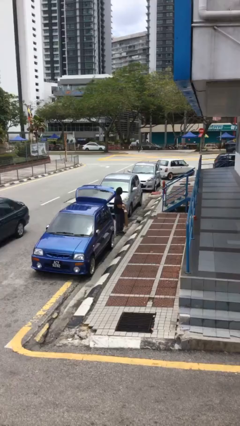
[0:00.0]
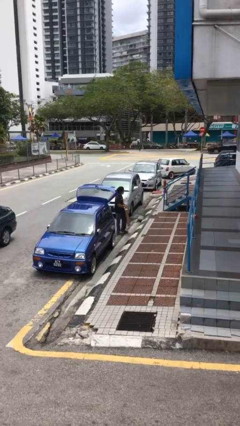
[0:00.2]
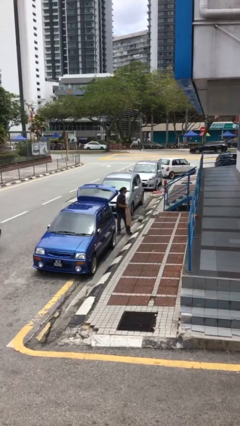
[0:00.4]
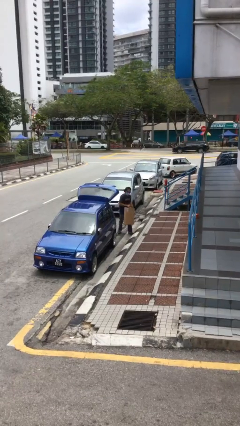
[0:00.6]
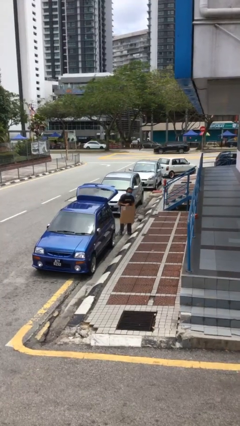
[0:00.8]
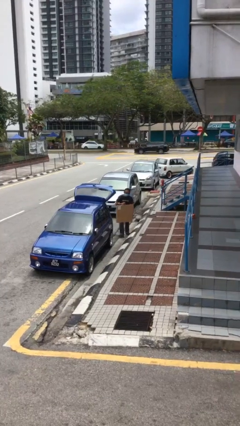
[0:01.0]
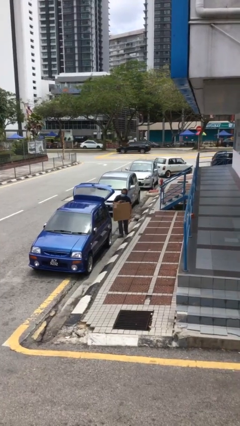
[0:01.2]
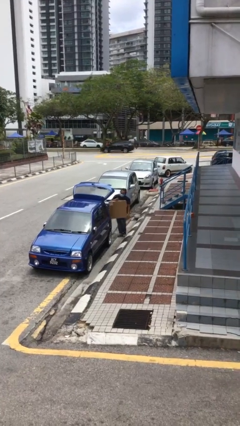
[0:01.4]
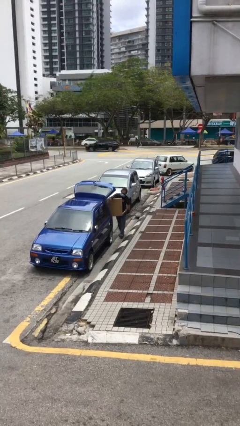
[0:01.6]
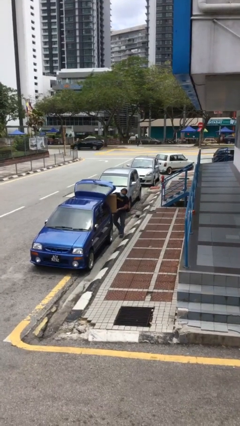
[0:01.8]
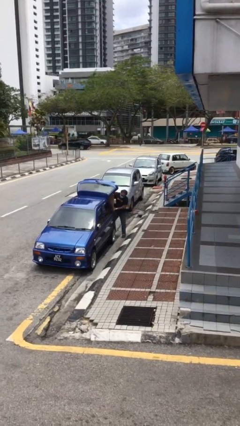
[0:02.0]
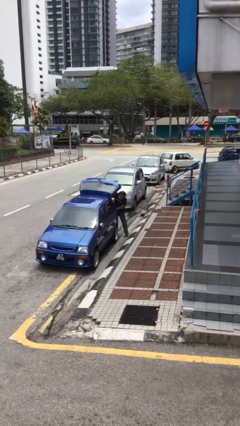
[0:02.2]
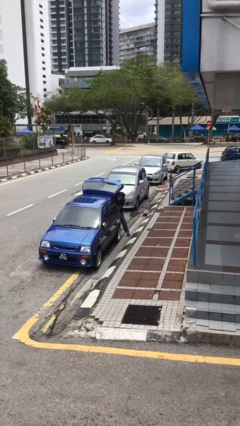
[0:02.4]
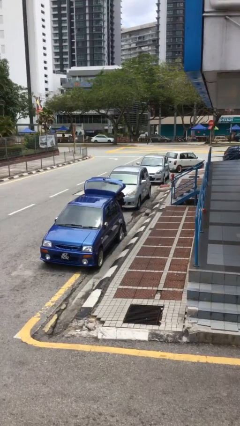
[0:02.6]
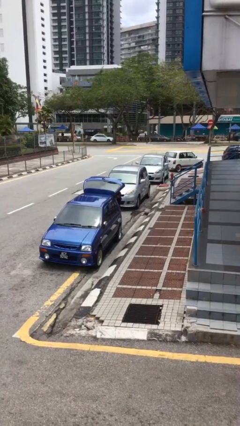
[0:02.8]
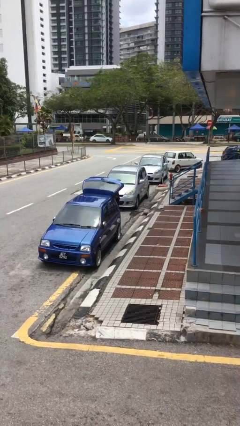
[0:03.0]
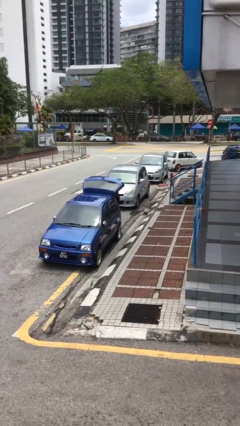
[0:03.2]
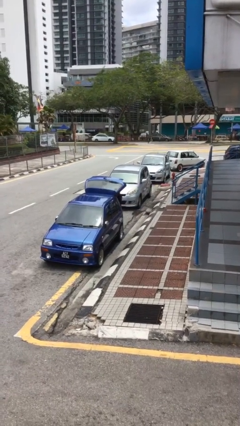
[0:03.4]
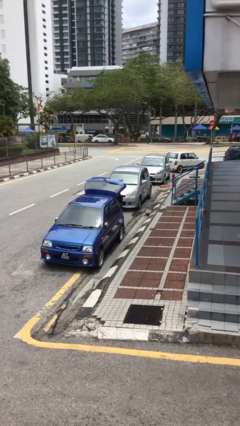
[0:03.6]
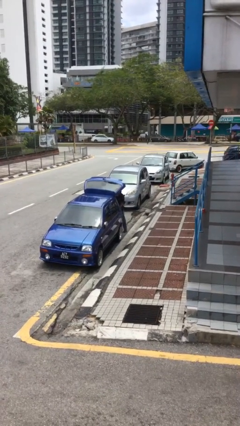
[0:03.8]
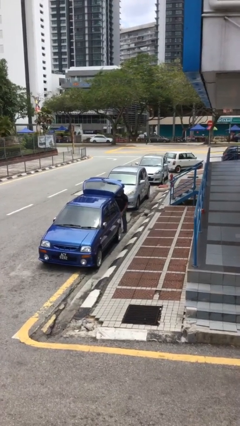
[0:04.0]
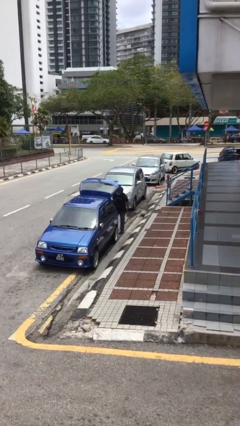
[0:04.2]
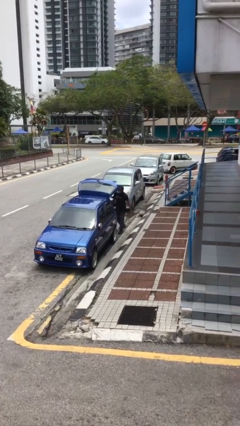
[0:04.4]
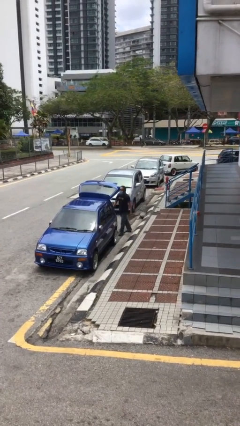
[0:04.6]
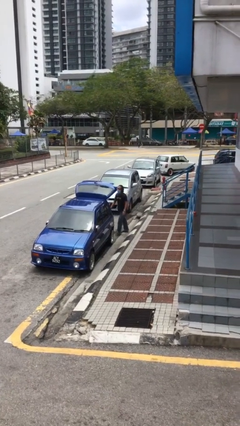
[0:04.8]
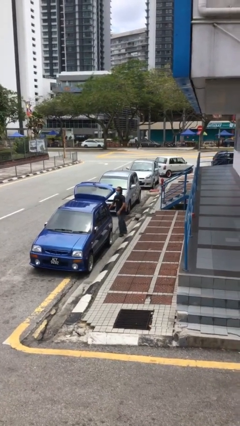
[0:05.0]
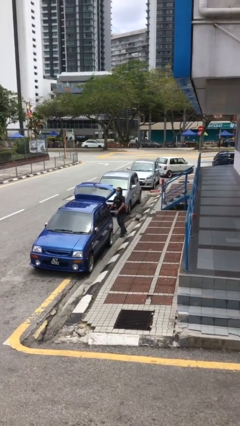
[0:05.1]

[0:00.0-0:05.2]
person loads car

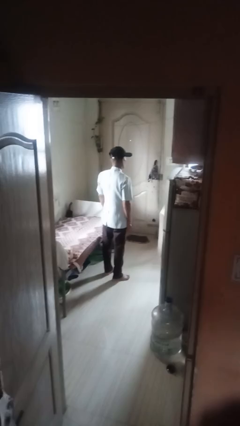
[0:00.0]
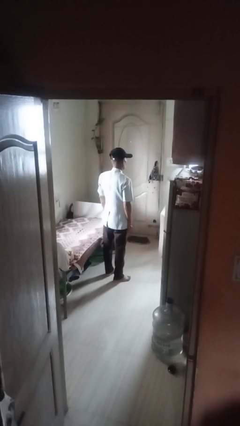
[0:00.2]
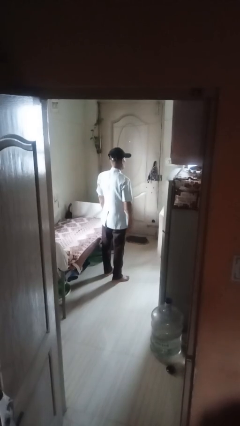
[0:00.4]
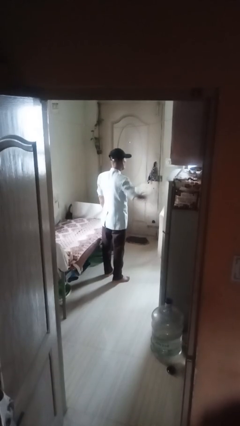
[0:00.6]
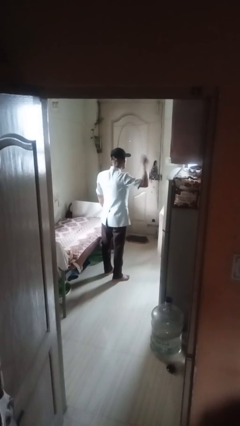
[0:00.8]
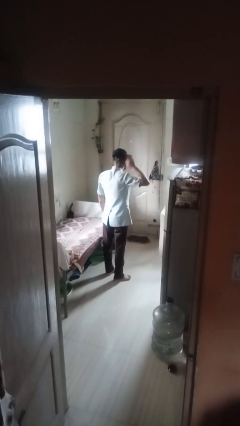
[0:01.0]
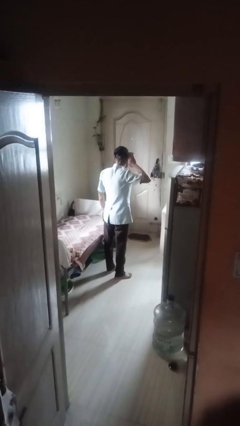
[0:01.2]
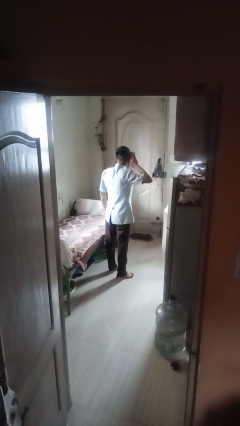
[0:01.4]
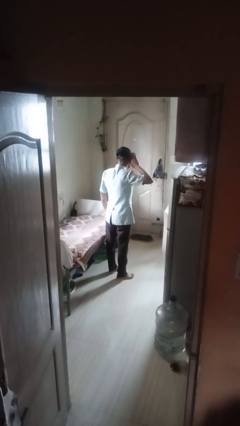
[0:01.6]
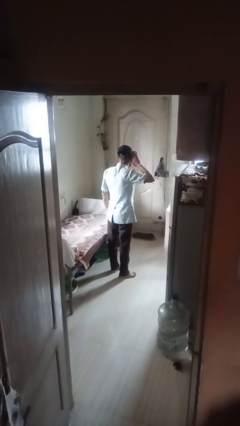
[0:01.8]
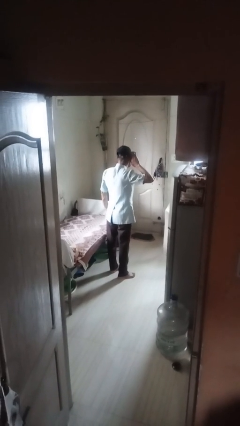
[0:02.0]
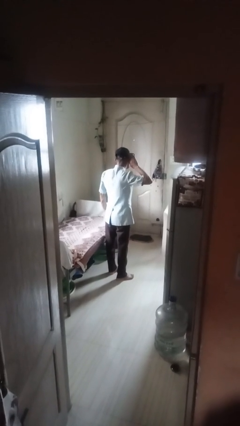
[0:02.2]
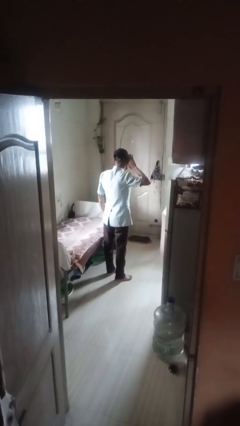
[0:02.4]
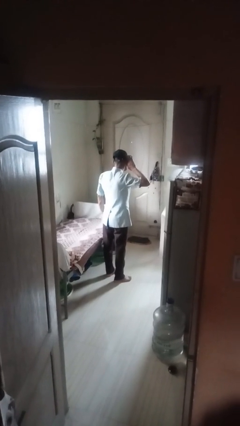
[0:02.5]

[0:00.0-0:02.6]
person gestures listen closely

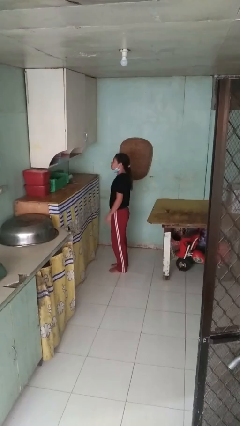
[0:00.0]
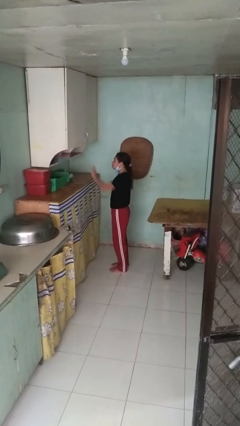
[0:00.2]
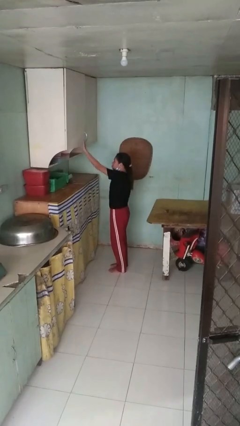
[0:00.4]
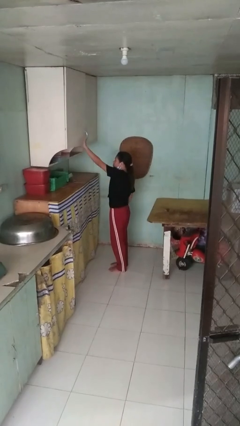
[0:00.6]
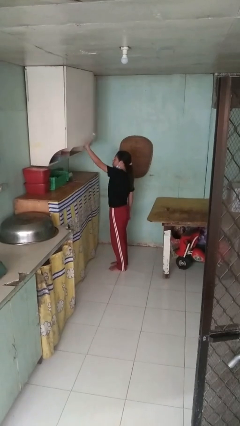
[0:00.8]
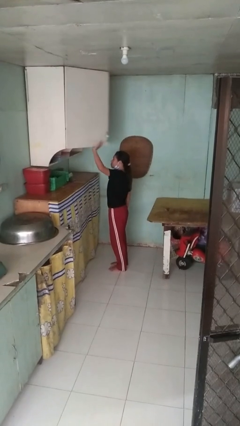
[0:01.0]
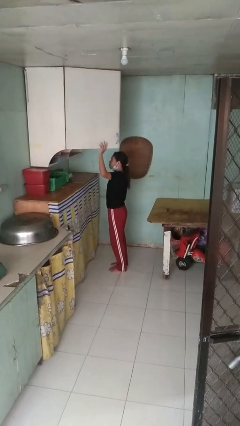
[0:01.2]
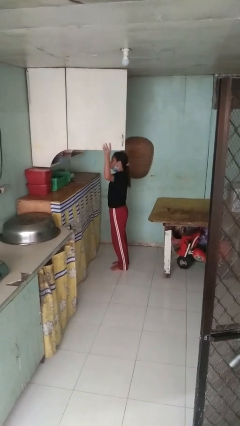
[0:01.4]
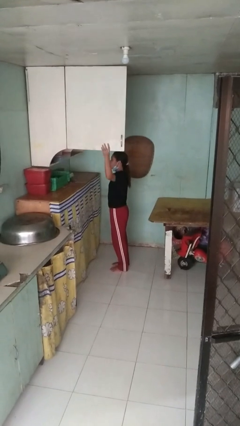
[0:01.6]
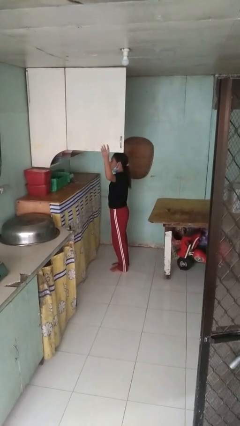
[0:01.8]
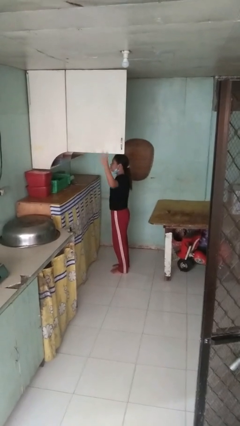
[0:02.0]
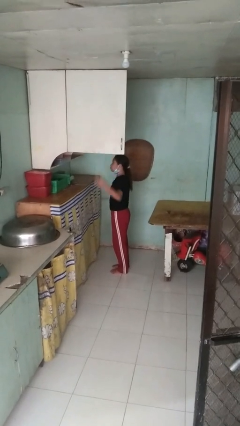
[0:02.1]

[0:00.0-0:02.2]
person opens cabinet

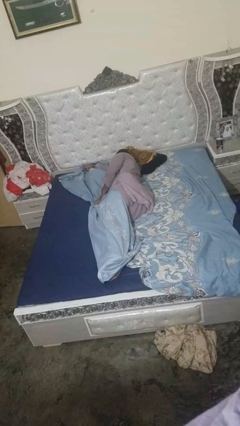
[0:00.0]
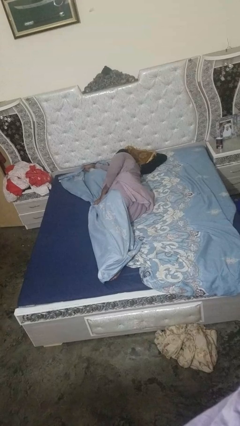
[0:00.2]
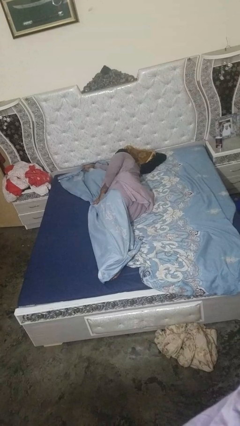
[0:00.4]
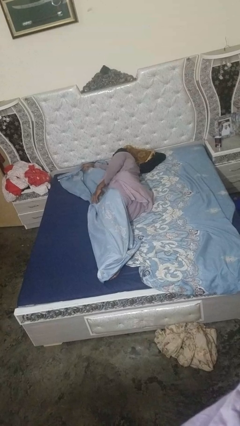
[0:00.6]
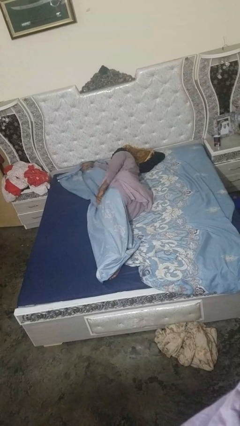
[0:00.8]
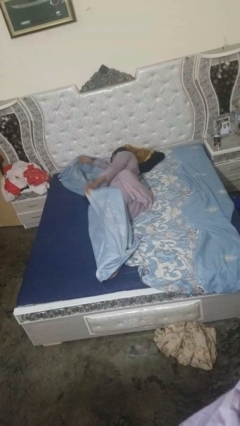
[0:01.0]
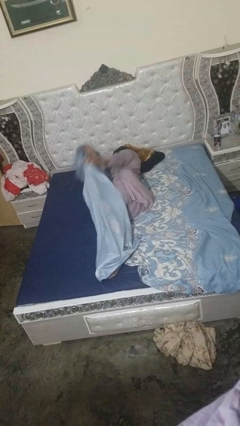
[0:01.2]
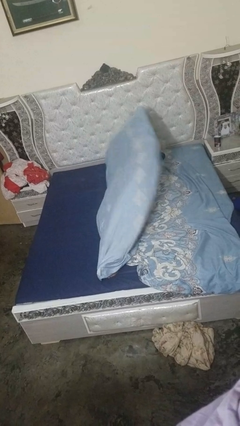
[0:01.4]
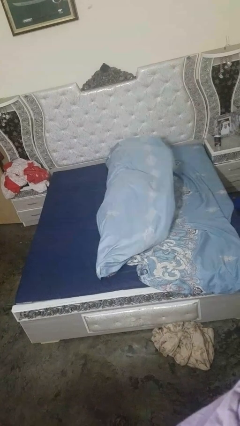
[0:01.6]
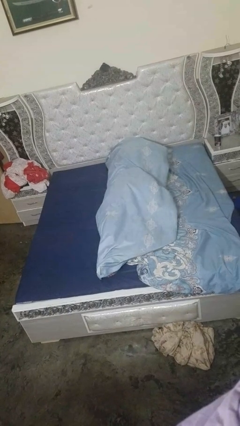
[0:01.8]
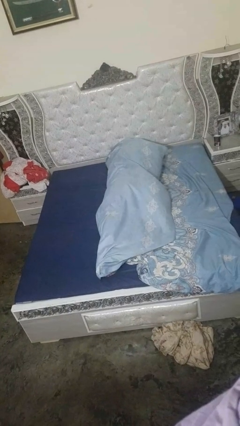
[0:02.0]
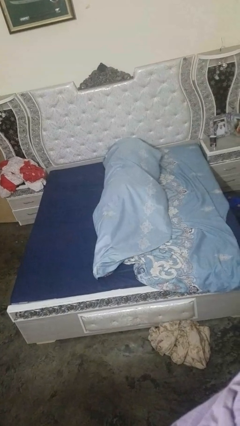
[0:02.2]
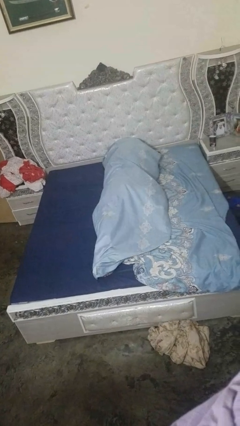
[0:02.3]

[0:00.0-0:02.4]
person covers with bedsheets

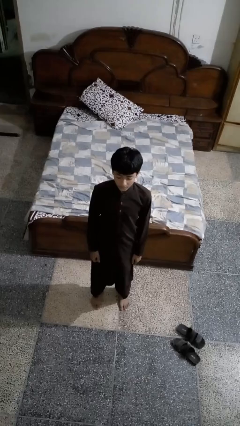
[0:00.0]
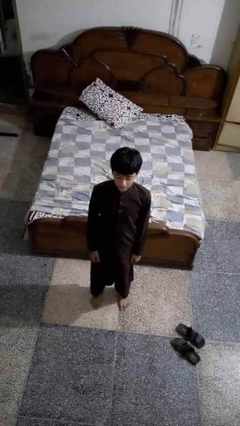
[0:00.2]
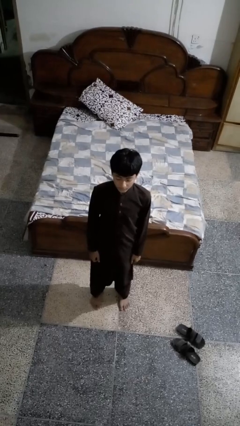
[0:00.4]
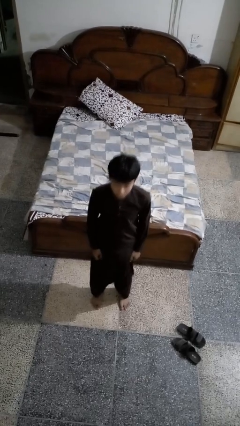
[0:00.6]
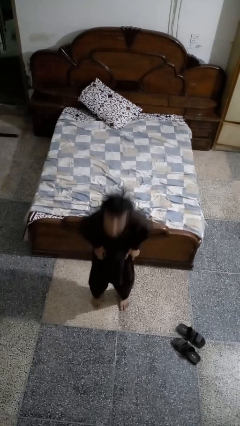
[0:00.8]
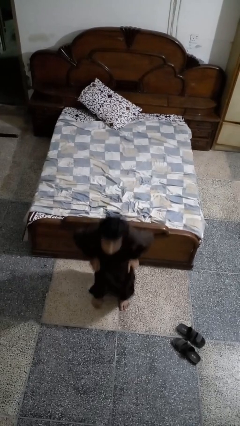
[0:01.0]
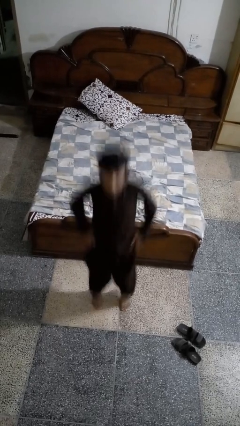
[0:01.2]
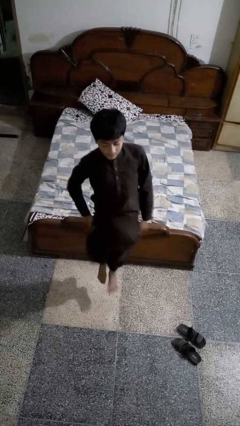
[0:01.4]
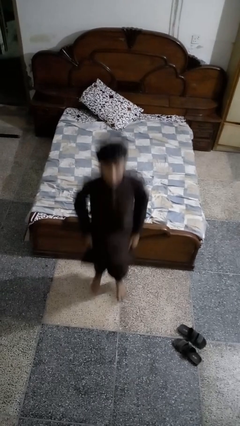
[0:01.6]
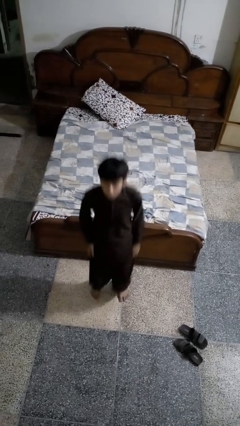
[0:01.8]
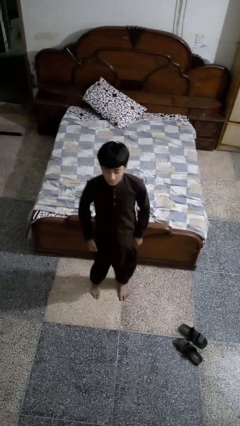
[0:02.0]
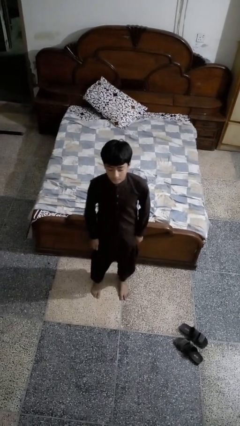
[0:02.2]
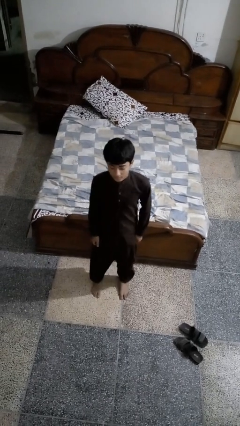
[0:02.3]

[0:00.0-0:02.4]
person jumps

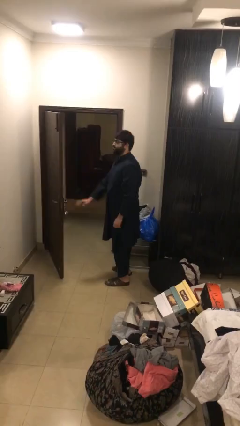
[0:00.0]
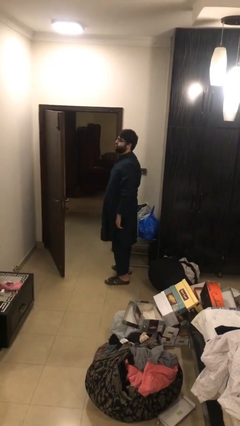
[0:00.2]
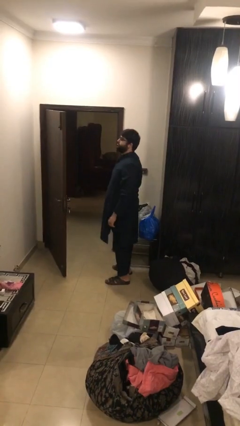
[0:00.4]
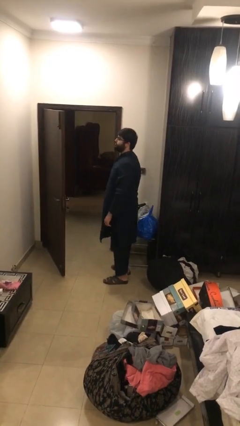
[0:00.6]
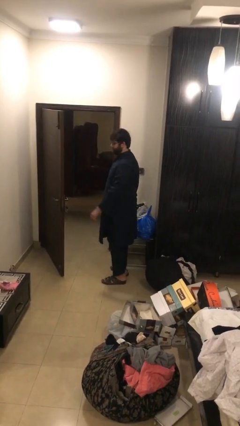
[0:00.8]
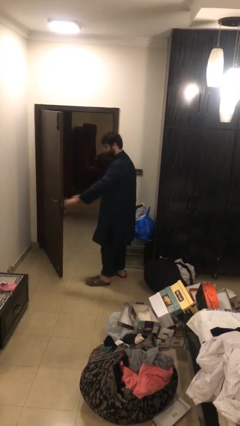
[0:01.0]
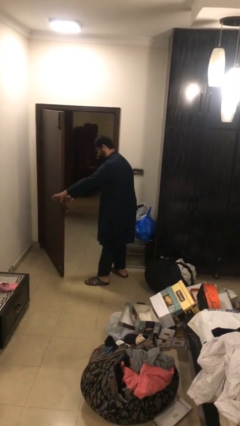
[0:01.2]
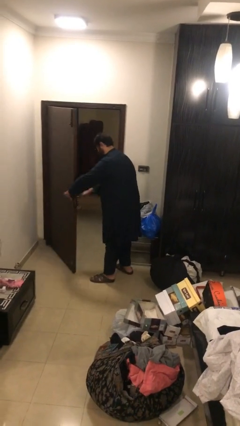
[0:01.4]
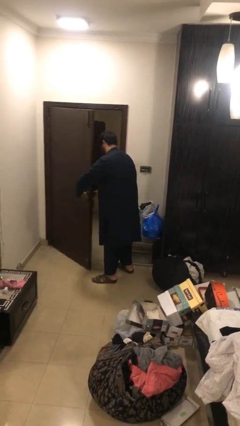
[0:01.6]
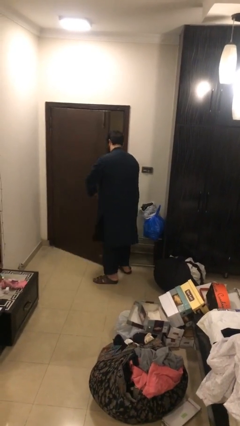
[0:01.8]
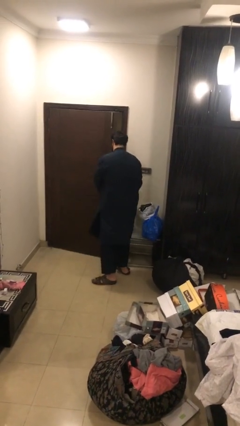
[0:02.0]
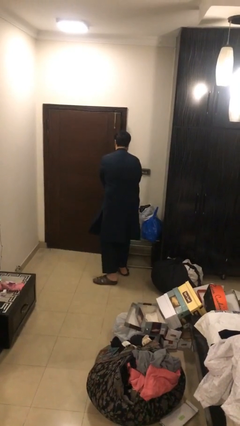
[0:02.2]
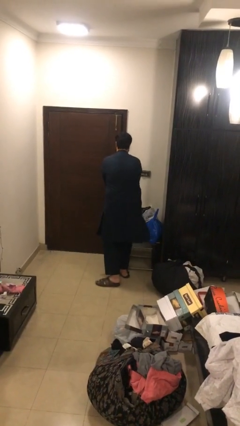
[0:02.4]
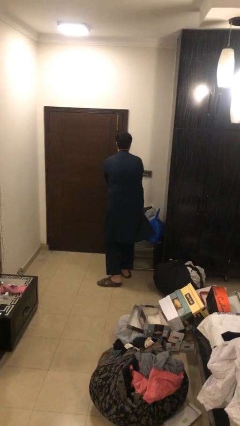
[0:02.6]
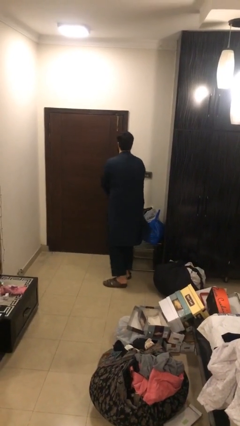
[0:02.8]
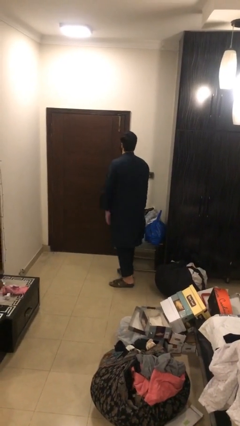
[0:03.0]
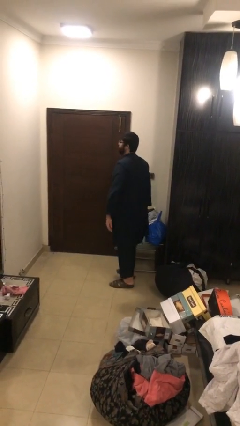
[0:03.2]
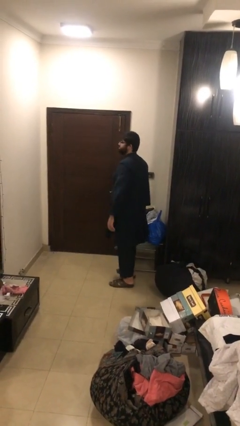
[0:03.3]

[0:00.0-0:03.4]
person closes facility door
